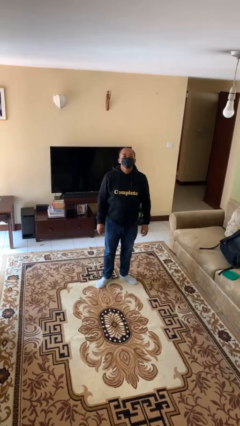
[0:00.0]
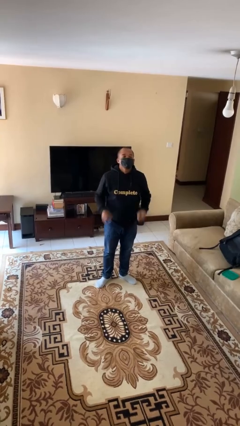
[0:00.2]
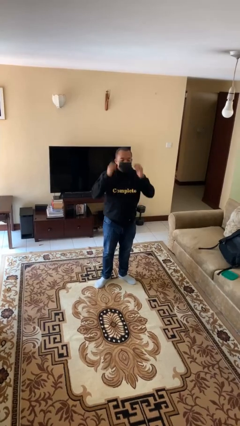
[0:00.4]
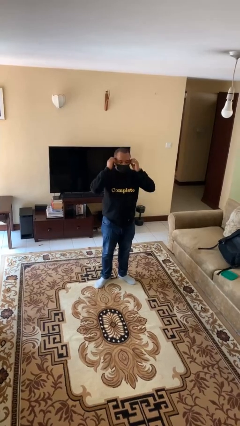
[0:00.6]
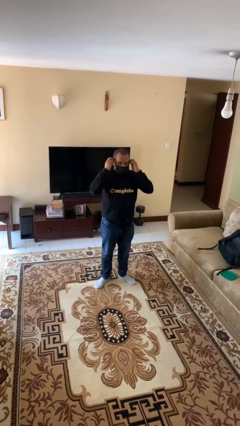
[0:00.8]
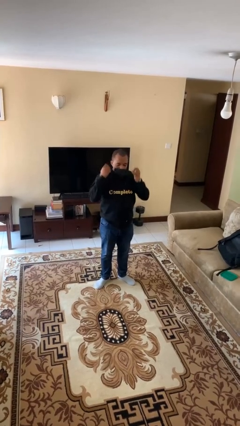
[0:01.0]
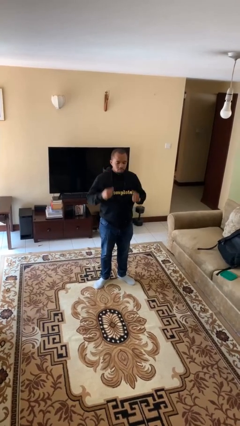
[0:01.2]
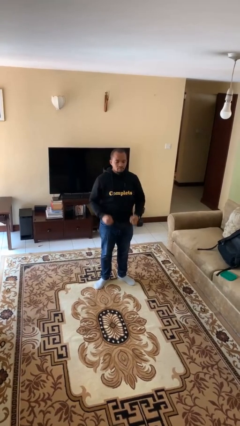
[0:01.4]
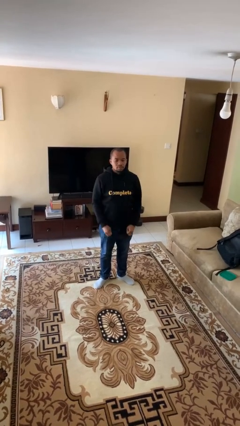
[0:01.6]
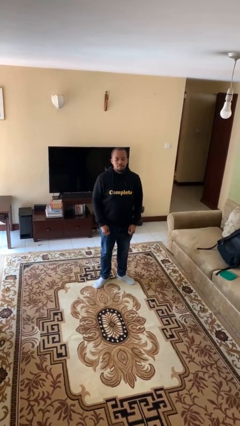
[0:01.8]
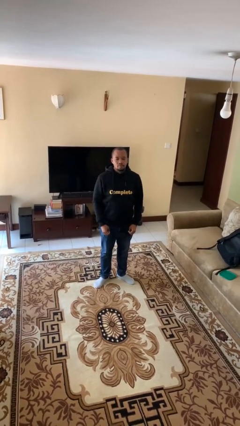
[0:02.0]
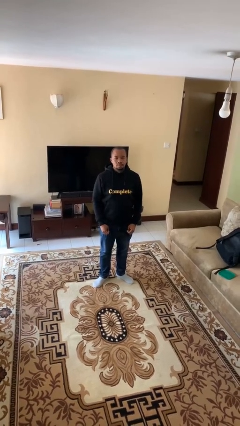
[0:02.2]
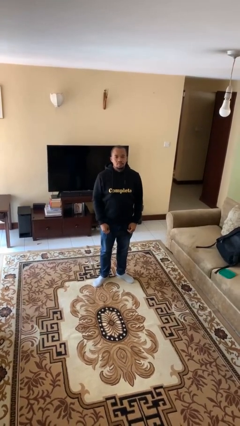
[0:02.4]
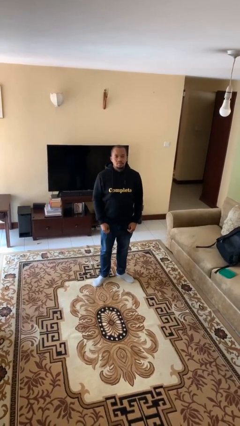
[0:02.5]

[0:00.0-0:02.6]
person takes off facemask

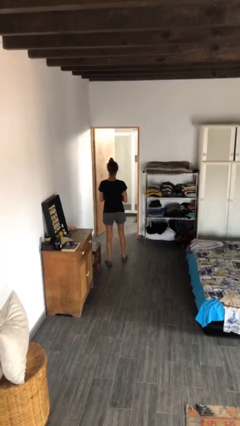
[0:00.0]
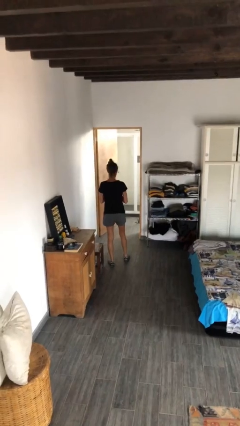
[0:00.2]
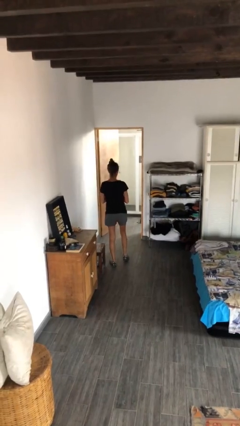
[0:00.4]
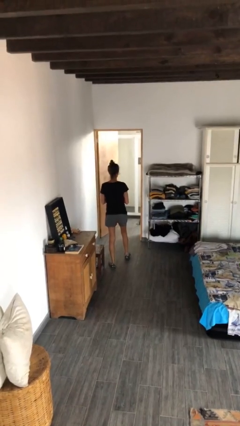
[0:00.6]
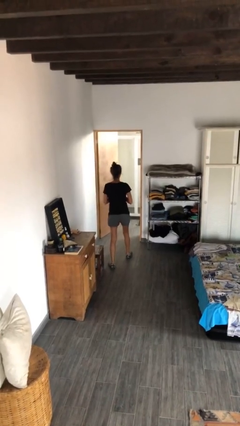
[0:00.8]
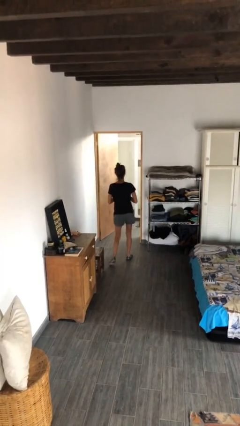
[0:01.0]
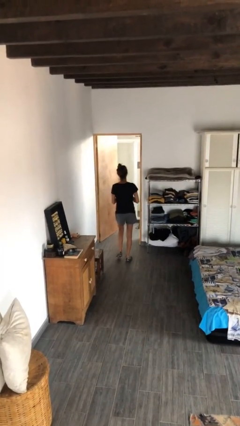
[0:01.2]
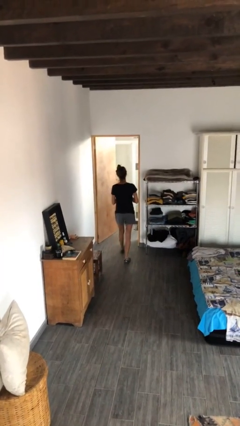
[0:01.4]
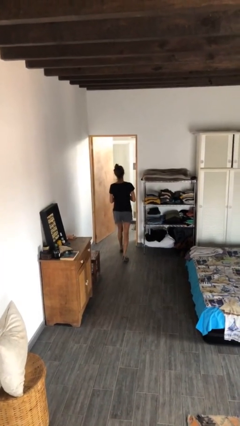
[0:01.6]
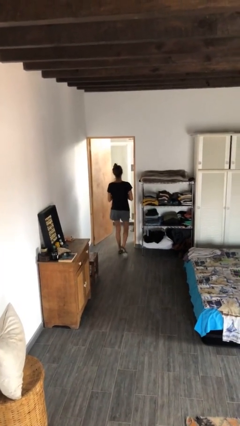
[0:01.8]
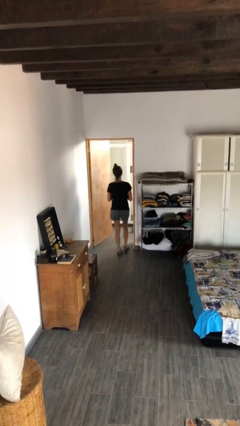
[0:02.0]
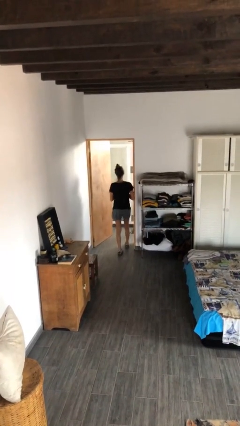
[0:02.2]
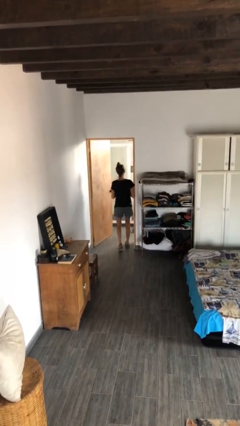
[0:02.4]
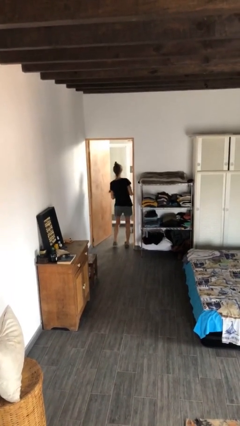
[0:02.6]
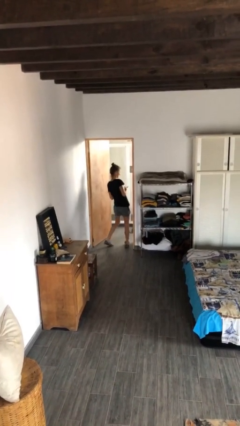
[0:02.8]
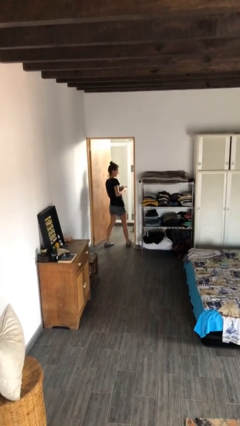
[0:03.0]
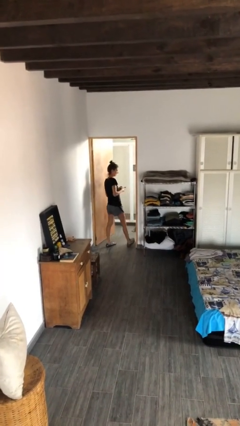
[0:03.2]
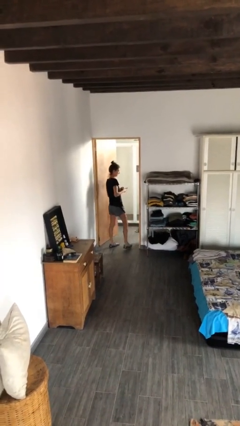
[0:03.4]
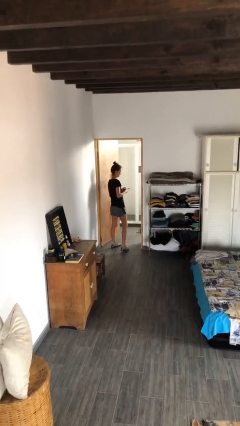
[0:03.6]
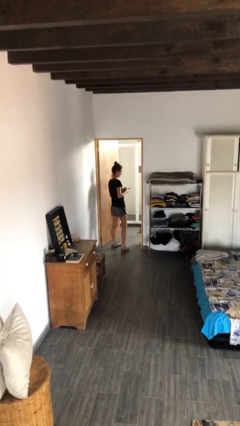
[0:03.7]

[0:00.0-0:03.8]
person bumps into wall

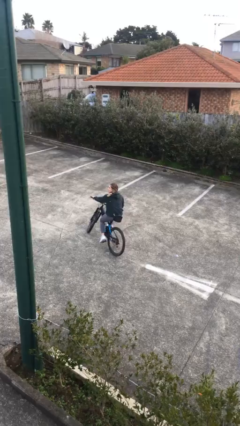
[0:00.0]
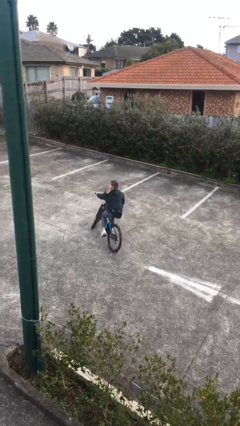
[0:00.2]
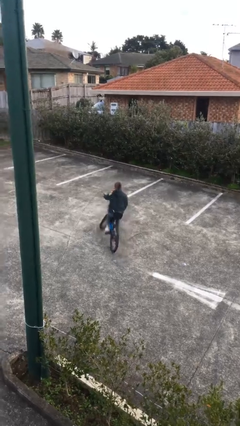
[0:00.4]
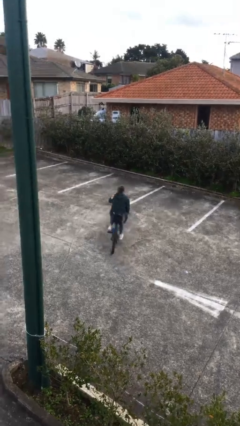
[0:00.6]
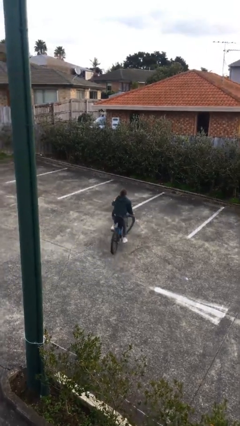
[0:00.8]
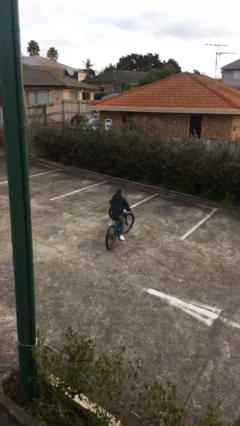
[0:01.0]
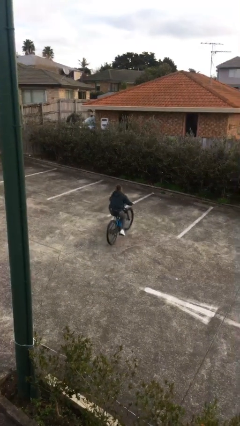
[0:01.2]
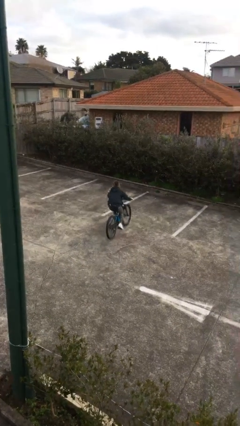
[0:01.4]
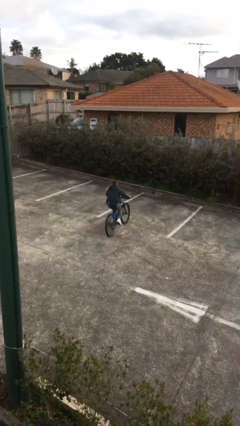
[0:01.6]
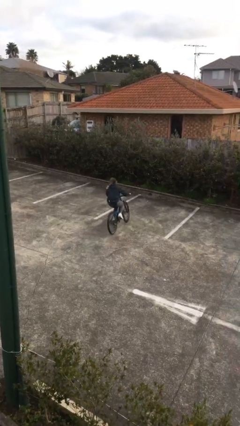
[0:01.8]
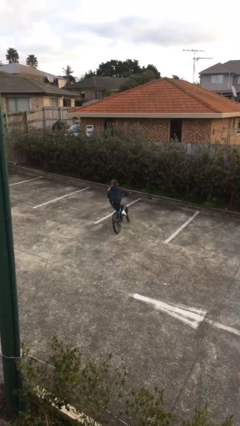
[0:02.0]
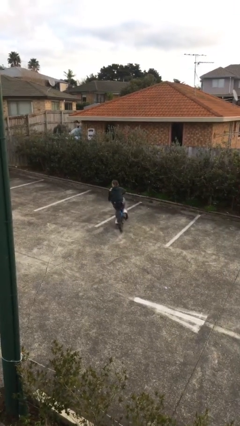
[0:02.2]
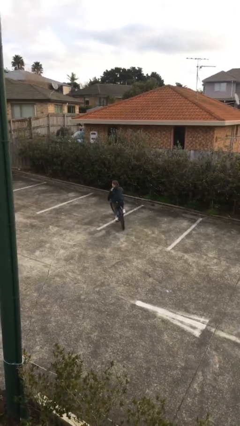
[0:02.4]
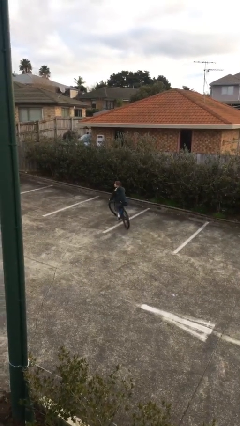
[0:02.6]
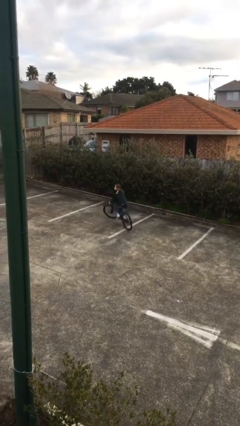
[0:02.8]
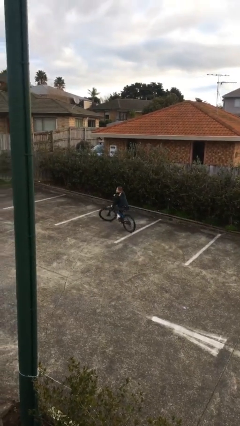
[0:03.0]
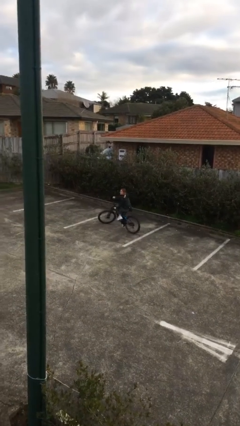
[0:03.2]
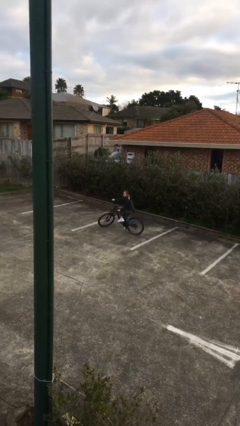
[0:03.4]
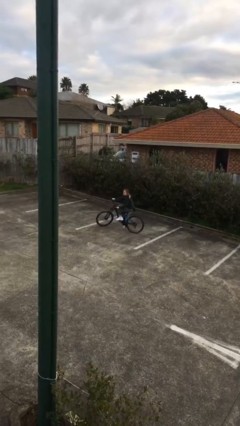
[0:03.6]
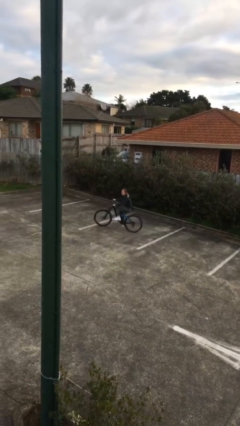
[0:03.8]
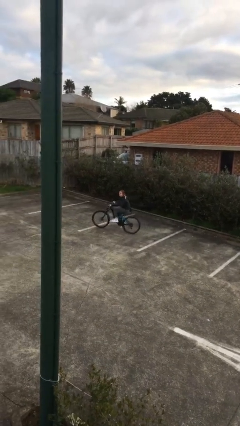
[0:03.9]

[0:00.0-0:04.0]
person rides bicycle

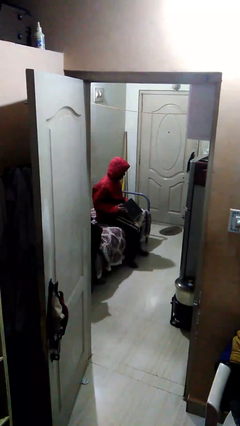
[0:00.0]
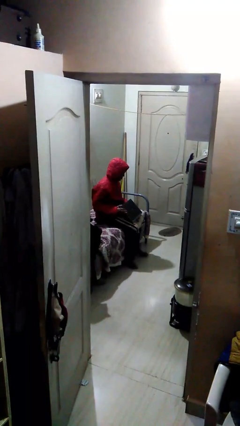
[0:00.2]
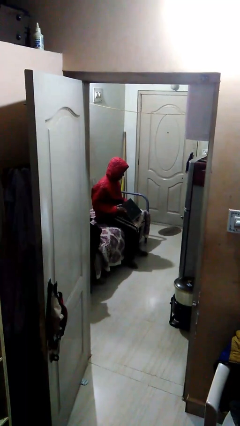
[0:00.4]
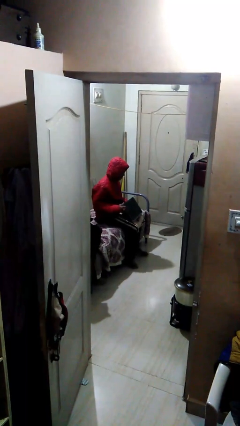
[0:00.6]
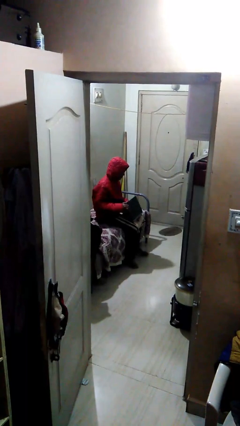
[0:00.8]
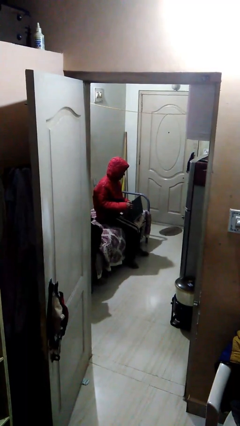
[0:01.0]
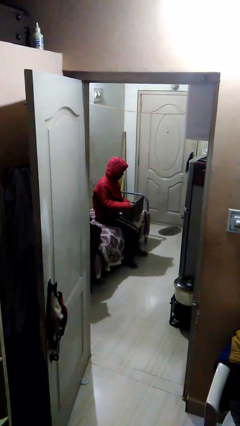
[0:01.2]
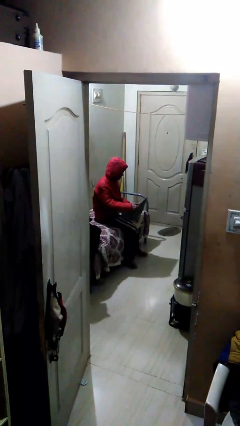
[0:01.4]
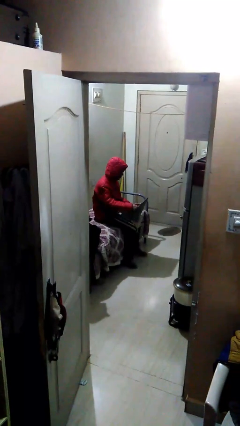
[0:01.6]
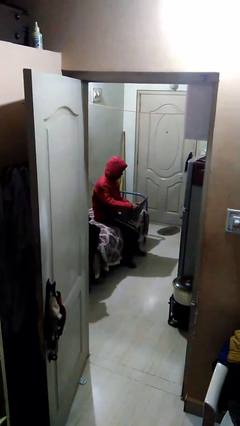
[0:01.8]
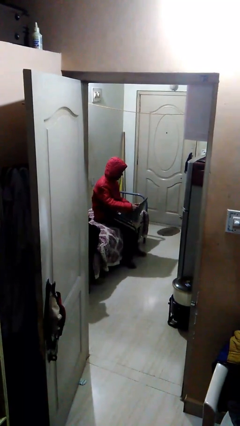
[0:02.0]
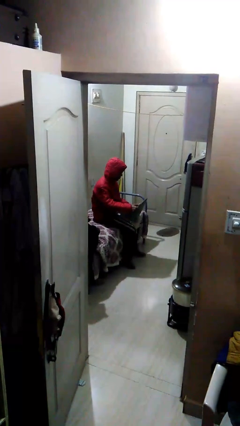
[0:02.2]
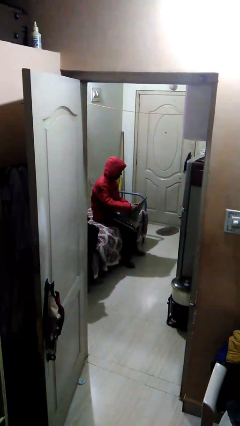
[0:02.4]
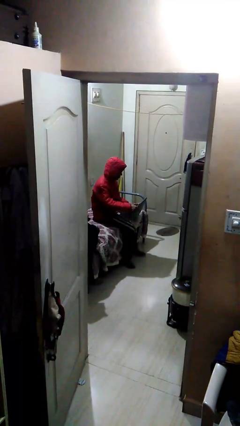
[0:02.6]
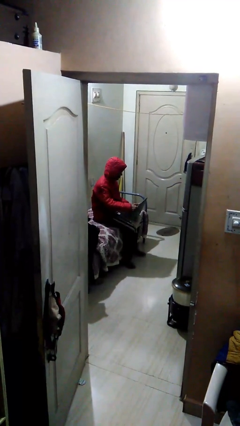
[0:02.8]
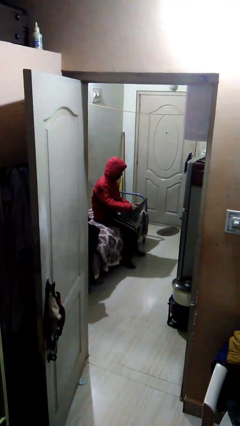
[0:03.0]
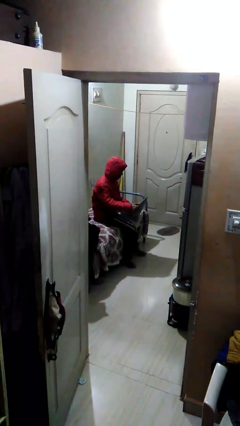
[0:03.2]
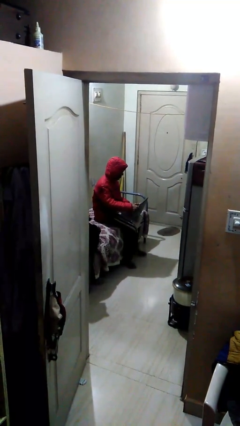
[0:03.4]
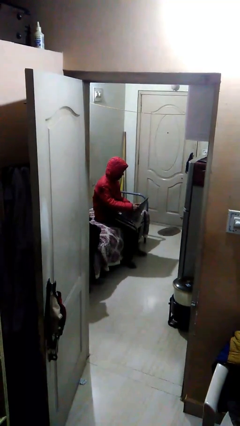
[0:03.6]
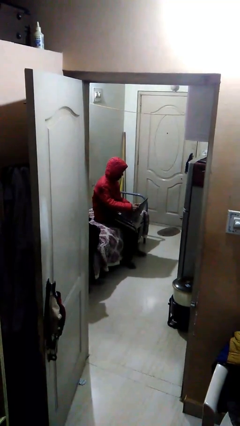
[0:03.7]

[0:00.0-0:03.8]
person interacts with laptop

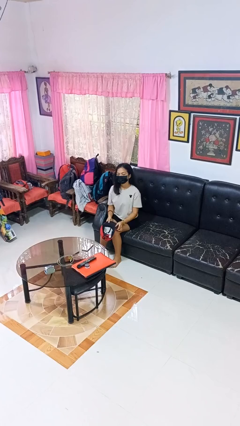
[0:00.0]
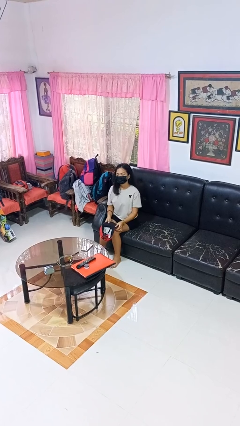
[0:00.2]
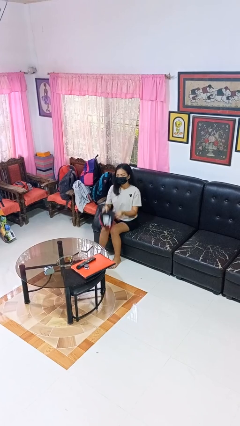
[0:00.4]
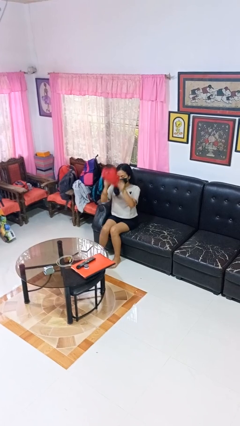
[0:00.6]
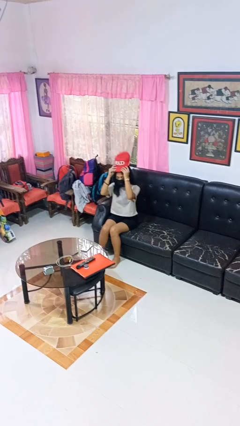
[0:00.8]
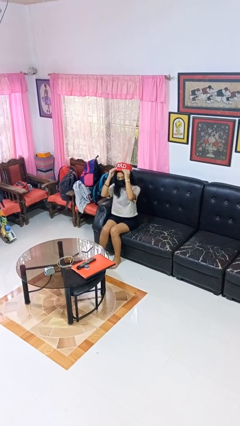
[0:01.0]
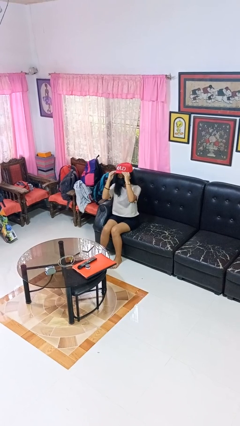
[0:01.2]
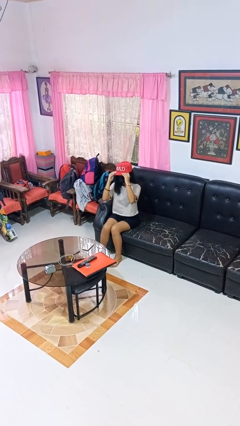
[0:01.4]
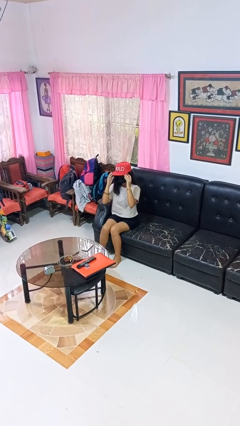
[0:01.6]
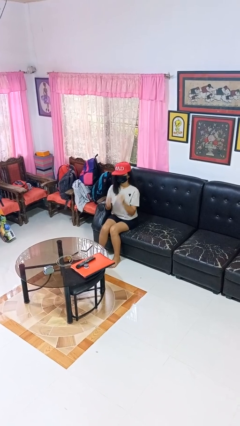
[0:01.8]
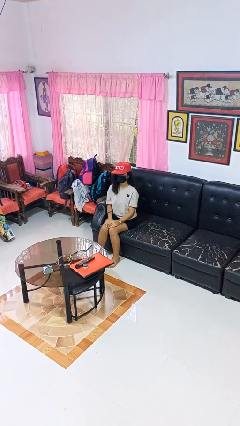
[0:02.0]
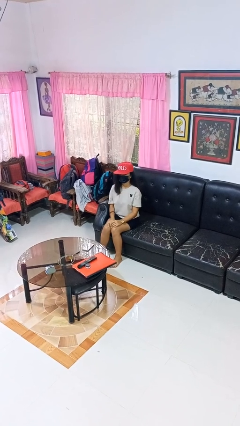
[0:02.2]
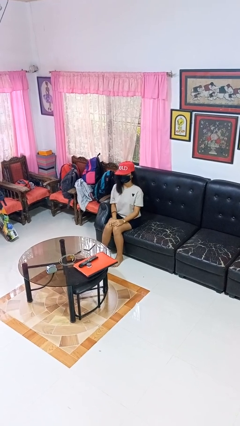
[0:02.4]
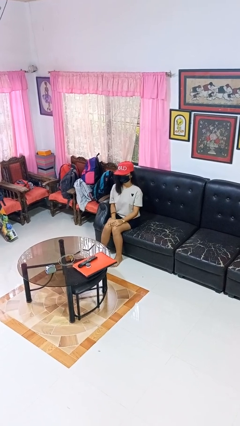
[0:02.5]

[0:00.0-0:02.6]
person puts on hat

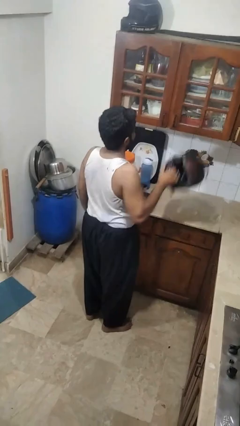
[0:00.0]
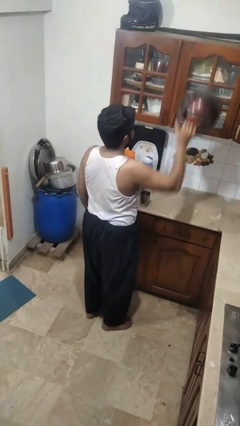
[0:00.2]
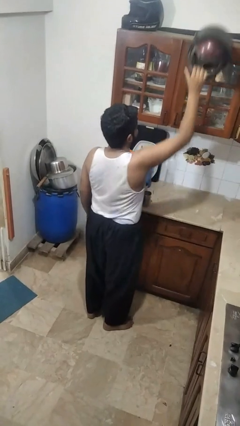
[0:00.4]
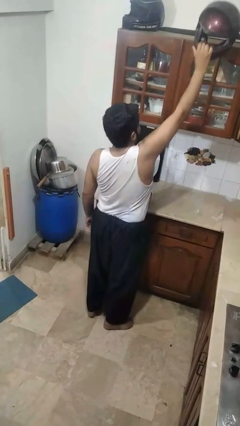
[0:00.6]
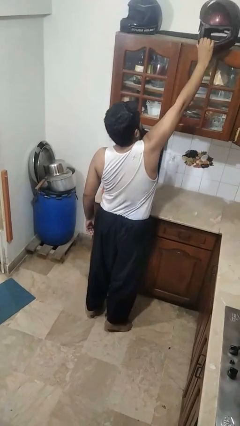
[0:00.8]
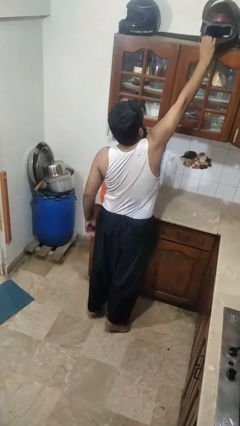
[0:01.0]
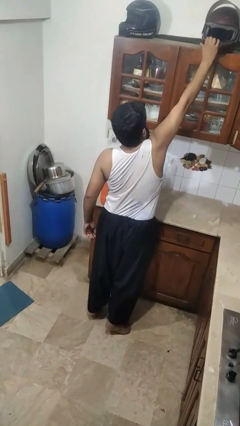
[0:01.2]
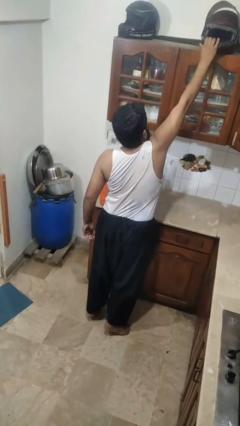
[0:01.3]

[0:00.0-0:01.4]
person puts down object on shelf
